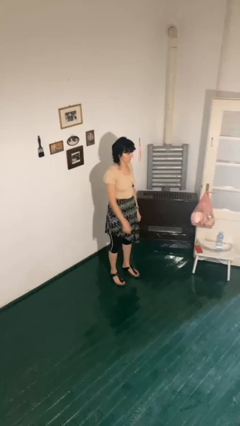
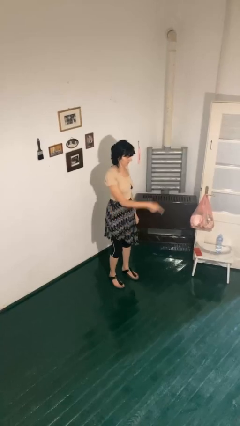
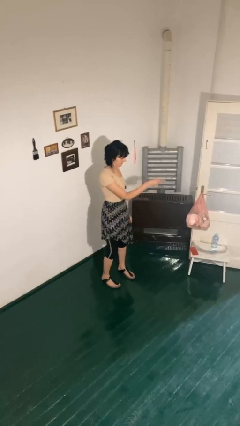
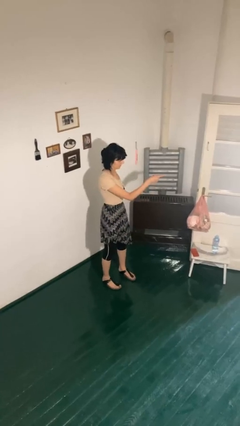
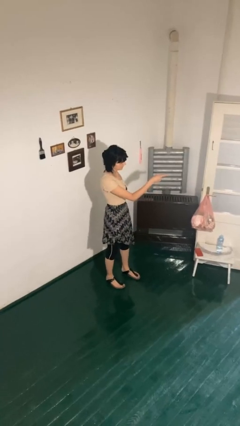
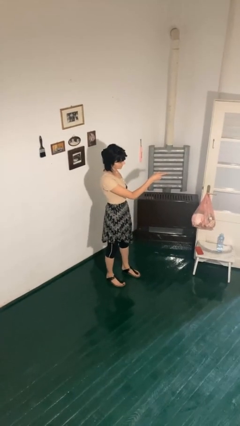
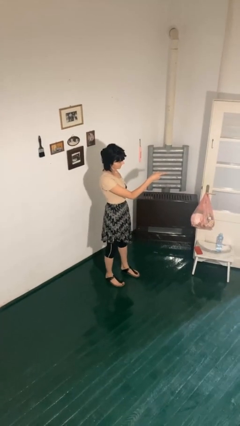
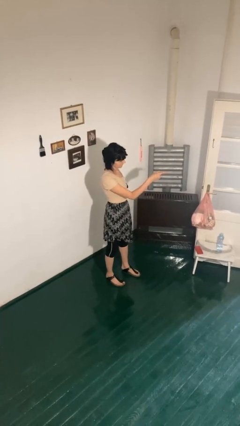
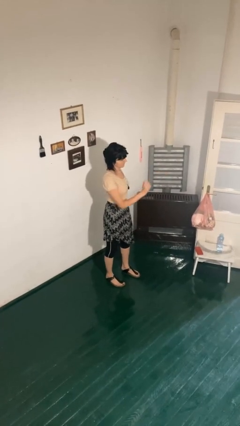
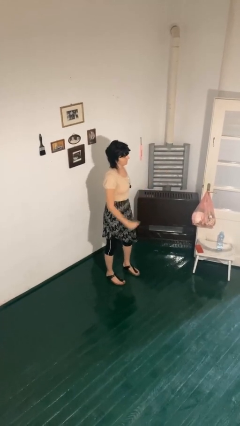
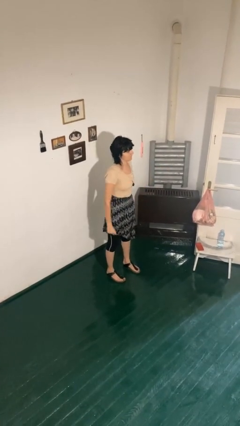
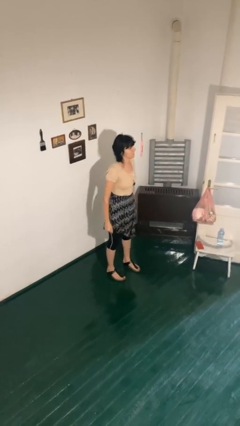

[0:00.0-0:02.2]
person points at person

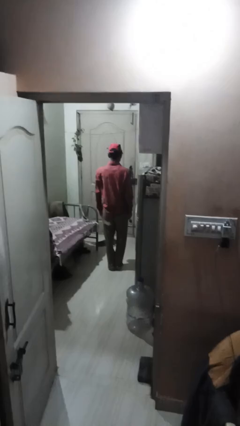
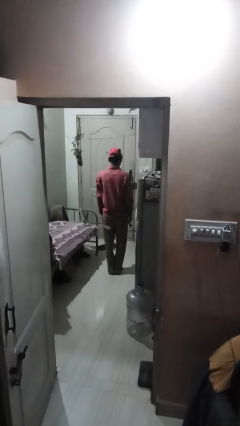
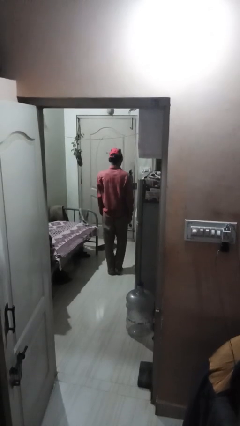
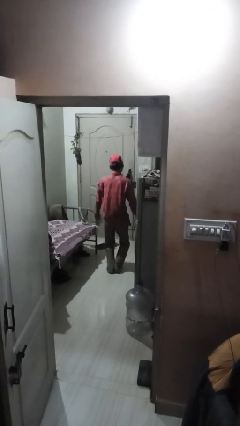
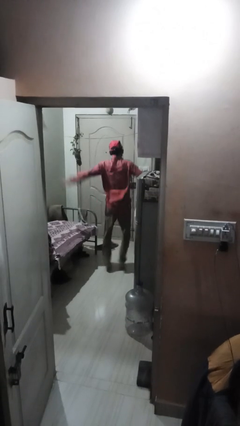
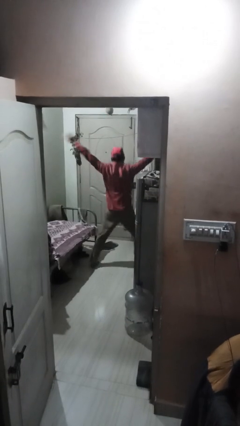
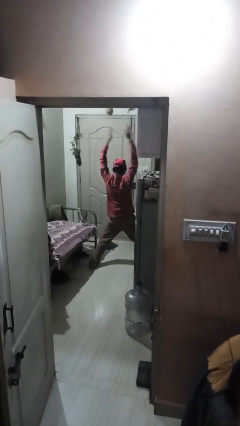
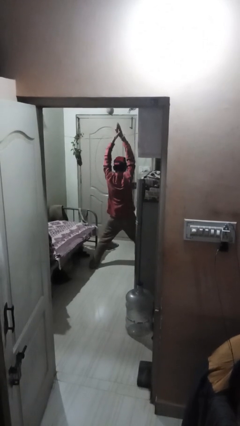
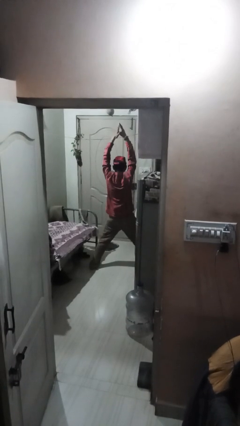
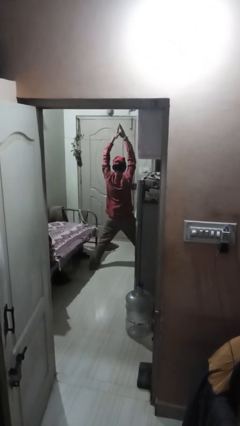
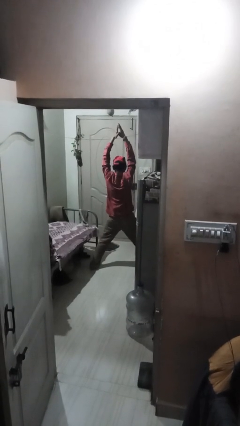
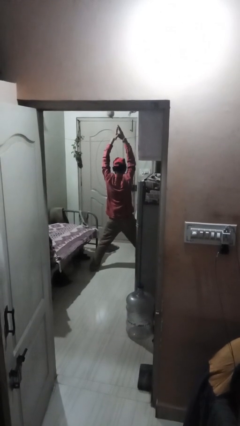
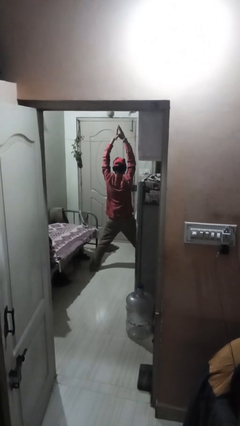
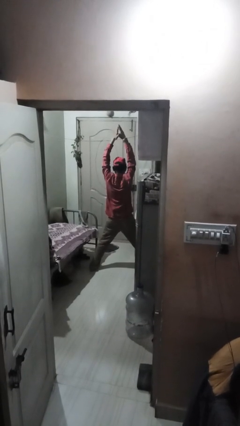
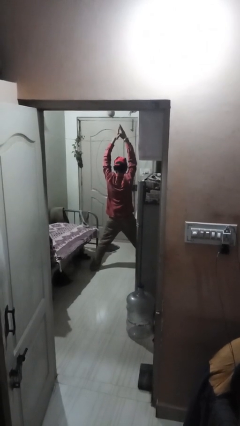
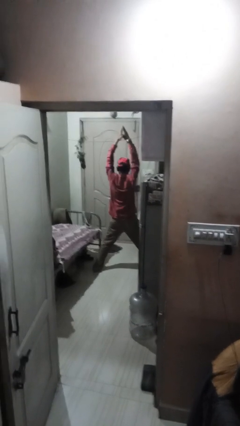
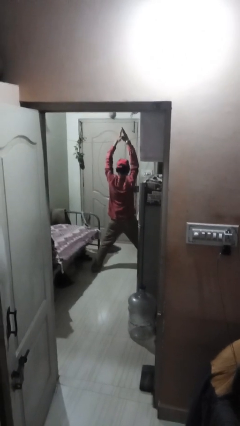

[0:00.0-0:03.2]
person exercises with jumping jacks

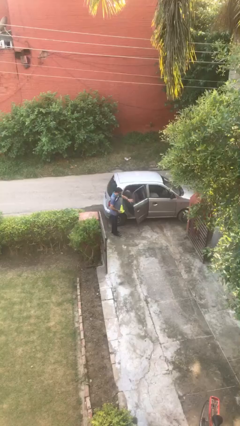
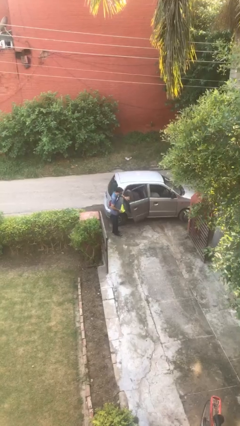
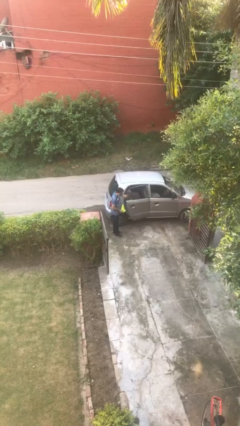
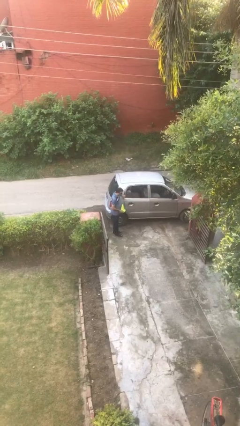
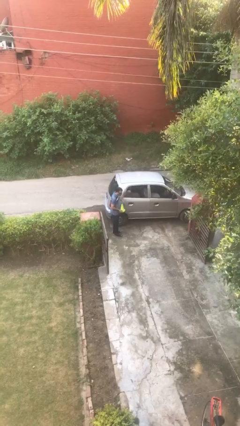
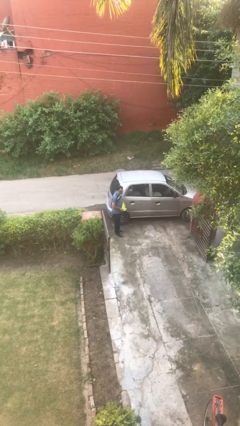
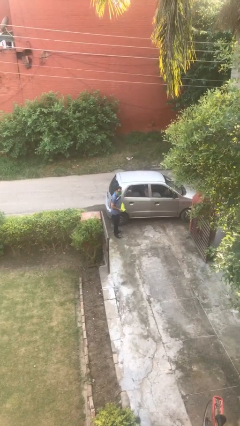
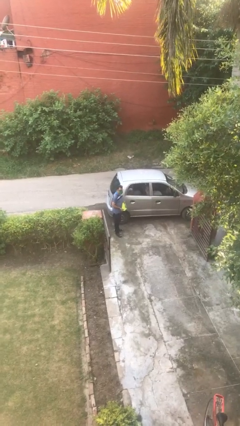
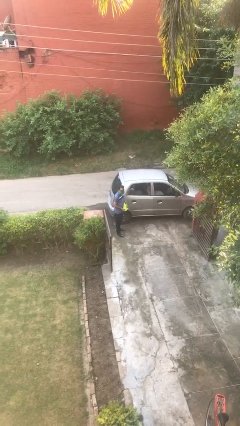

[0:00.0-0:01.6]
person closes car door

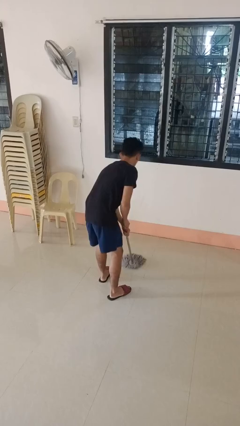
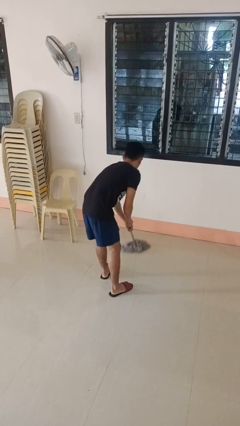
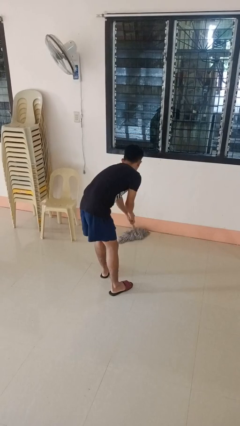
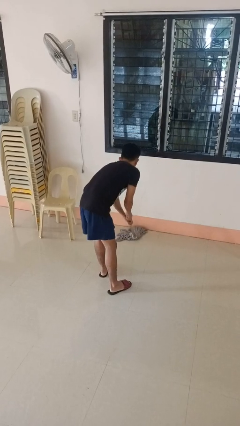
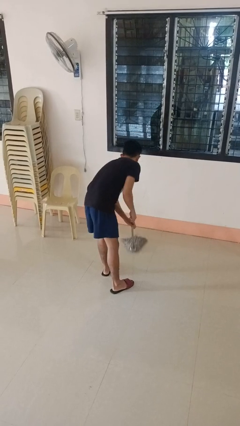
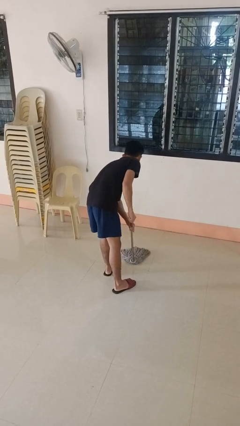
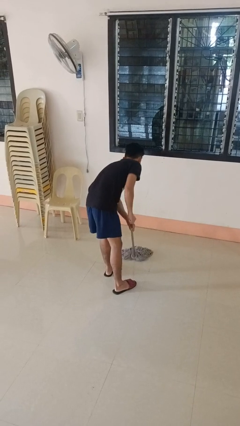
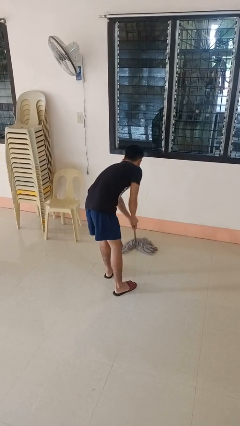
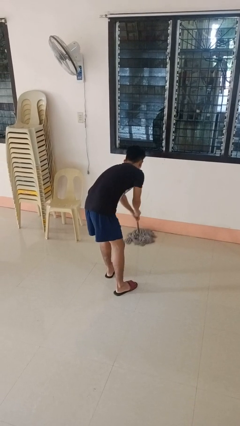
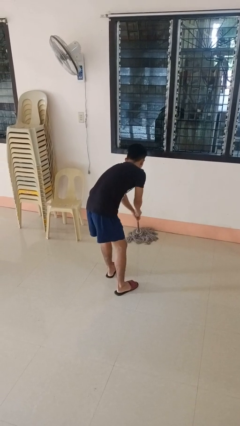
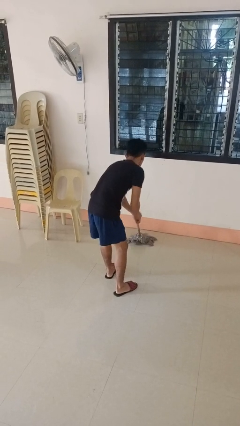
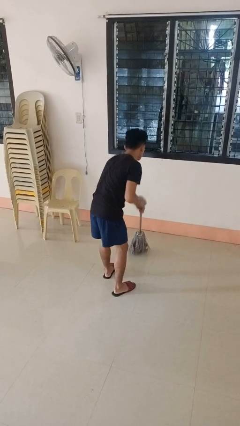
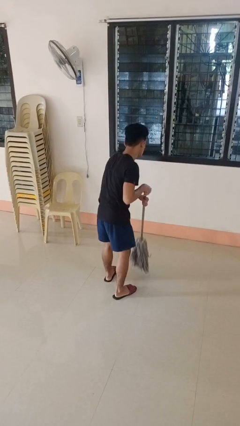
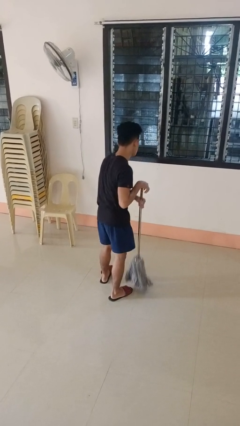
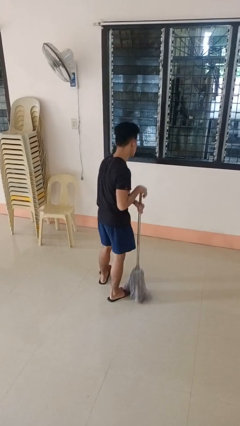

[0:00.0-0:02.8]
person mops

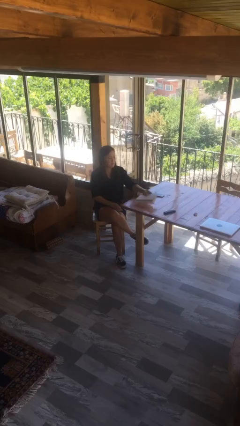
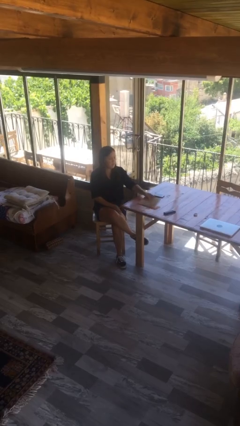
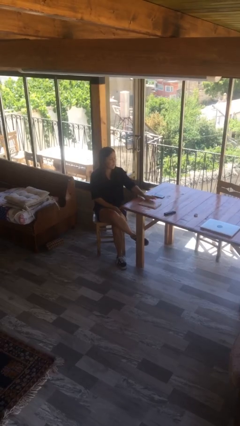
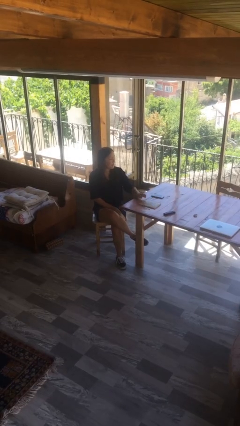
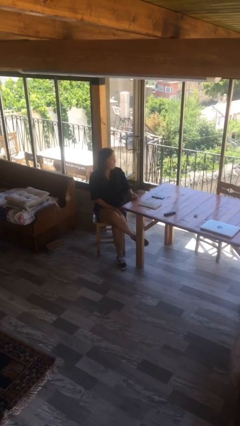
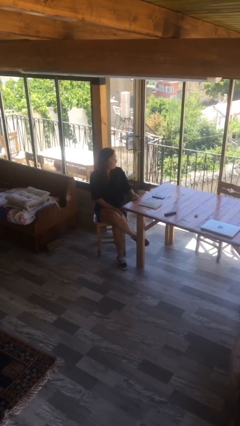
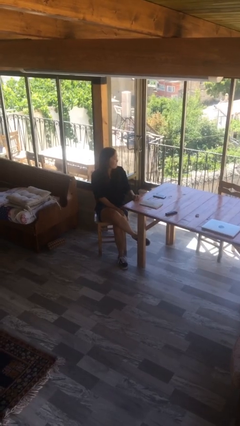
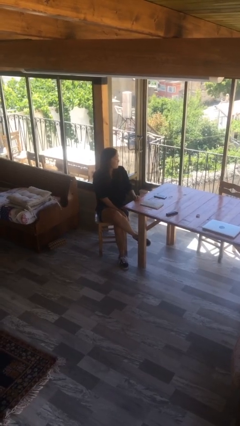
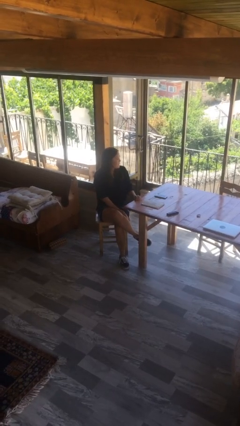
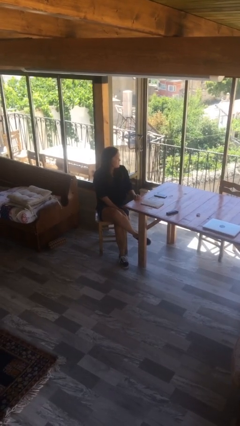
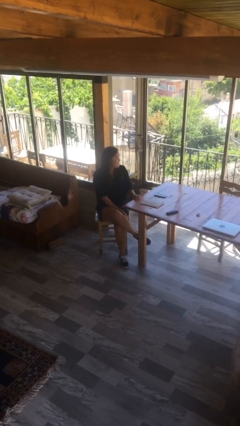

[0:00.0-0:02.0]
person puts down object on table

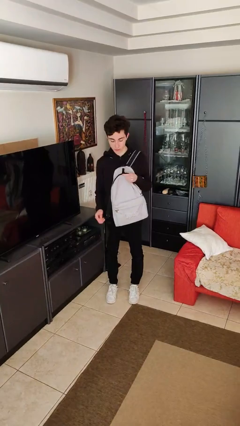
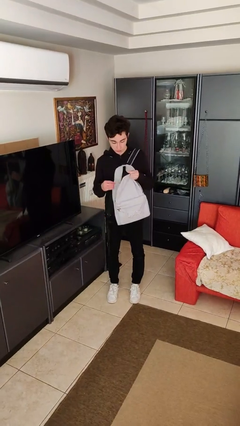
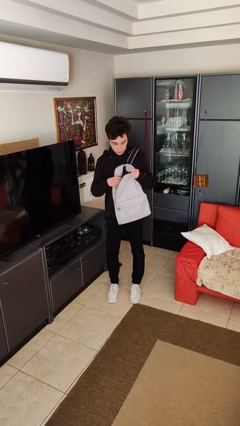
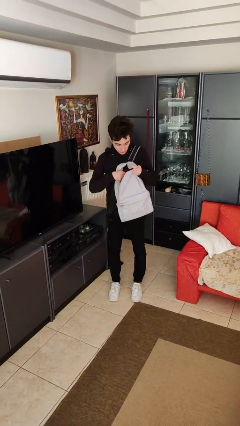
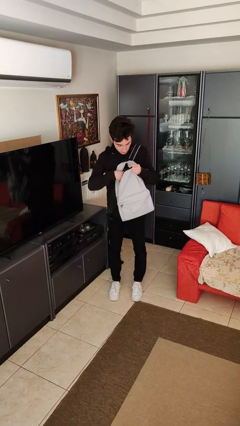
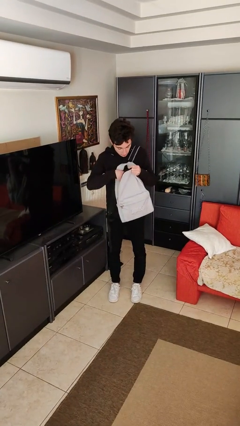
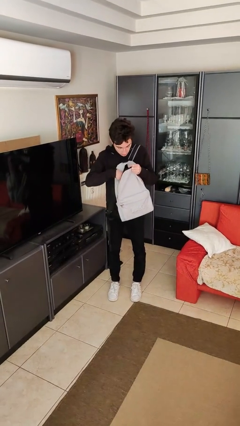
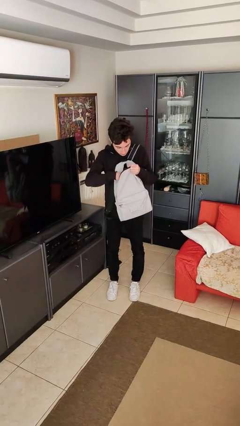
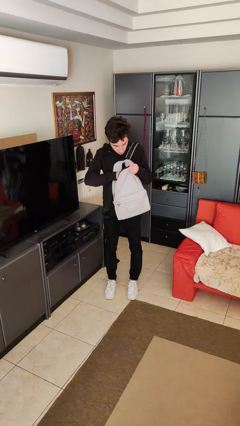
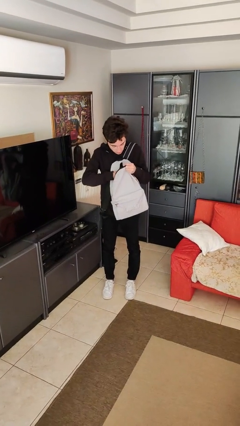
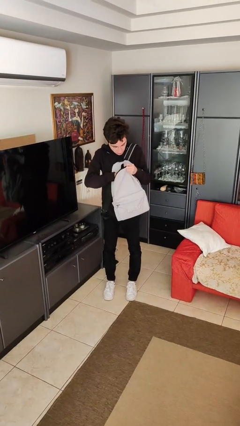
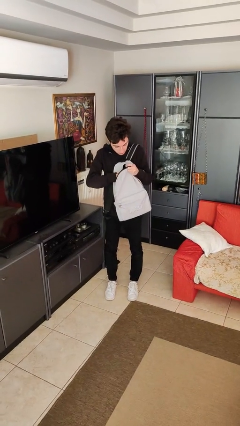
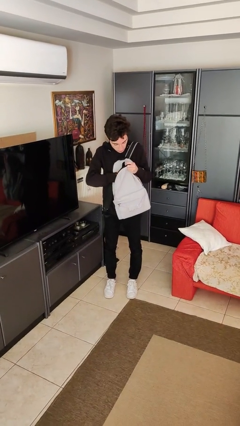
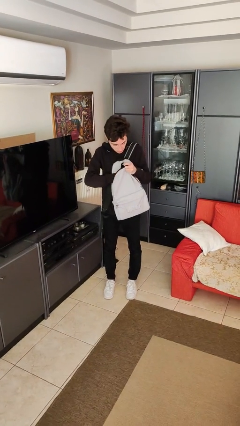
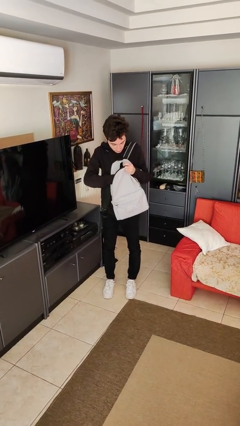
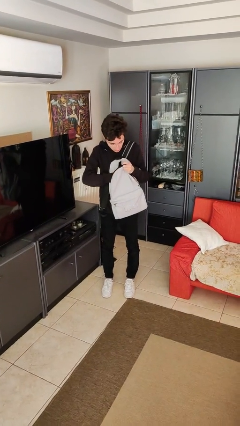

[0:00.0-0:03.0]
person searches in backpack

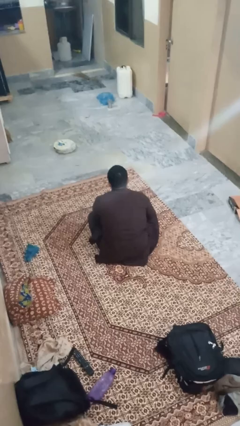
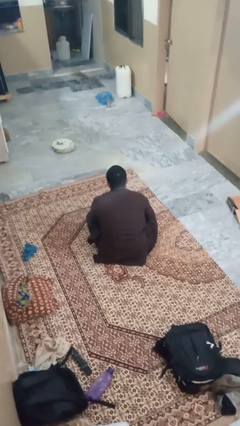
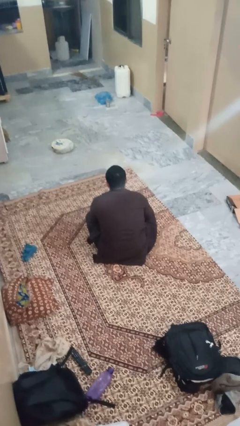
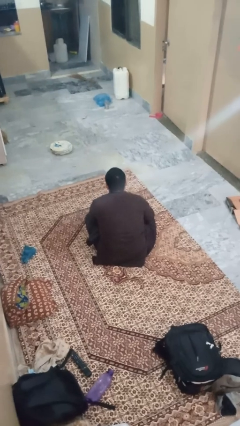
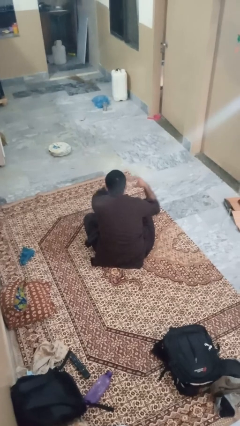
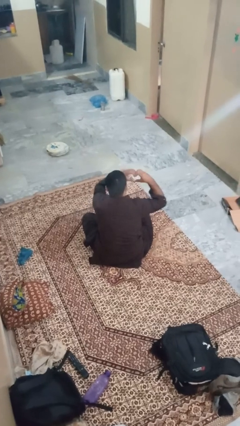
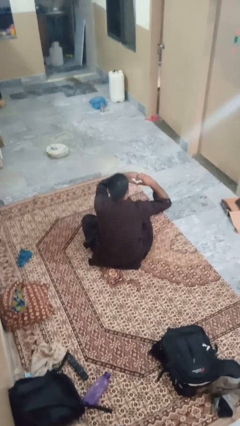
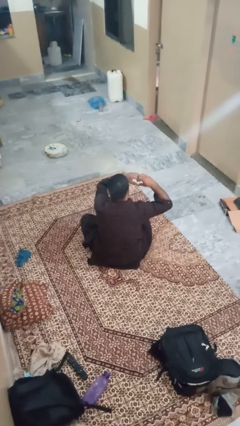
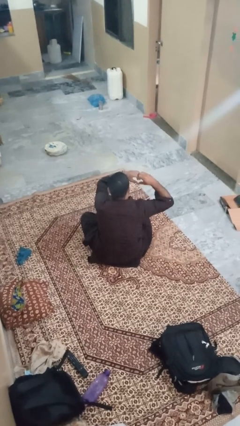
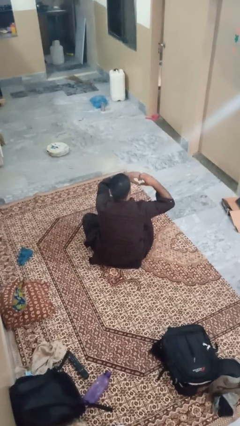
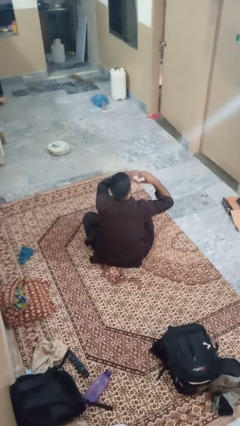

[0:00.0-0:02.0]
person gestures heart

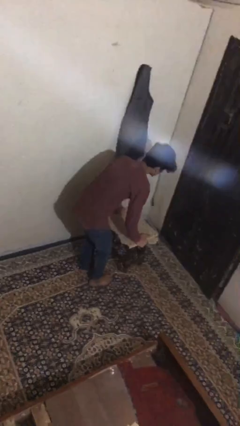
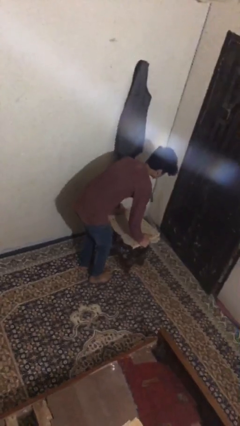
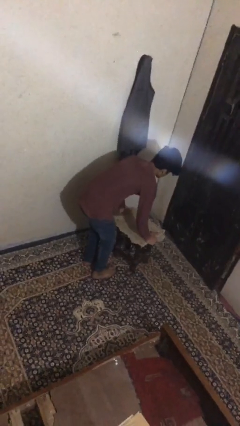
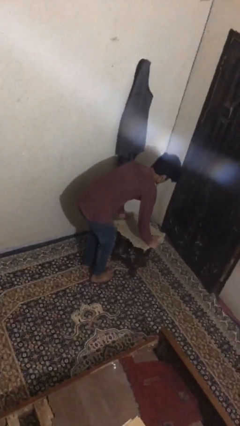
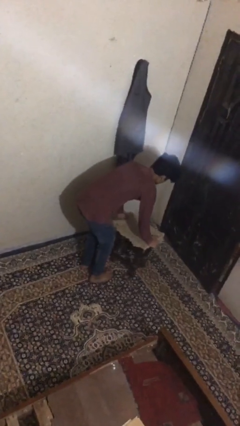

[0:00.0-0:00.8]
person puts down object on floor
